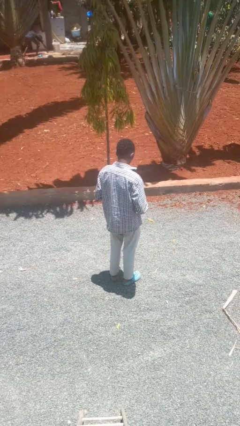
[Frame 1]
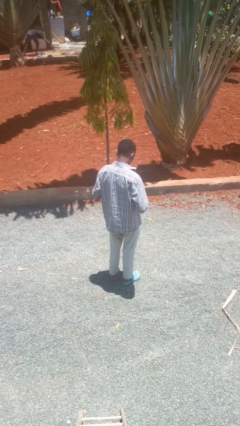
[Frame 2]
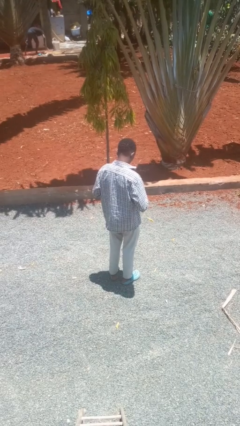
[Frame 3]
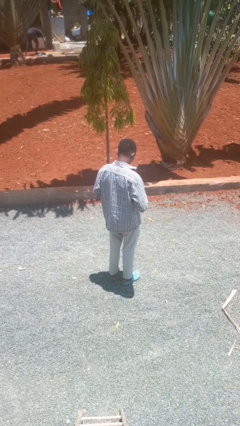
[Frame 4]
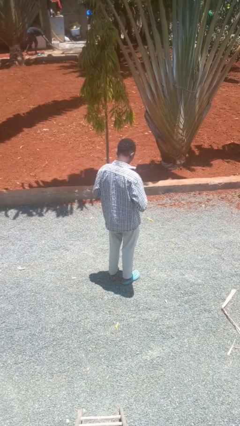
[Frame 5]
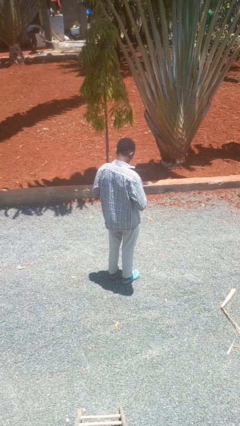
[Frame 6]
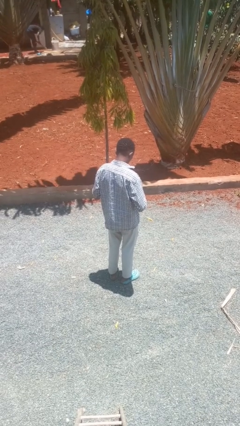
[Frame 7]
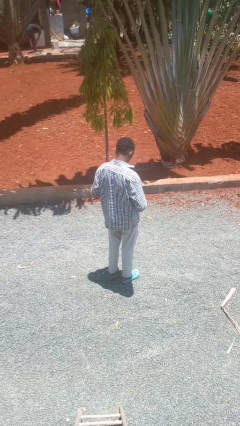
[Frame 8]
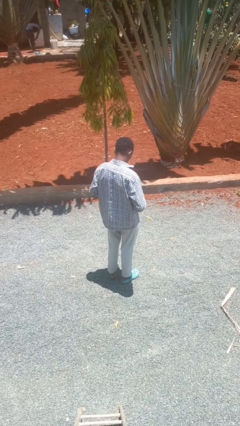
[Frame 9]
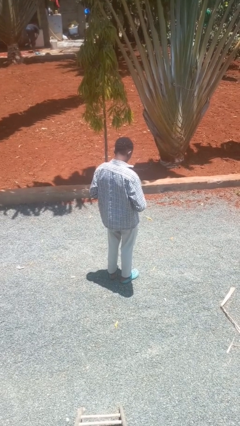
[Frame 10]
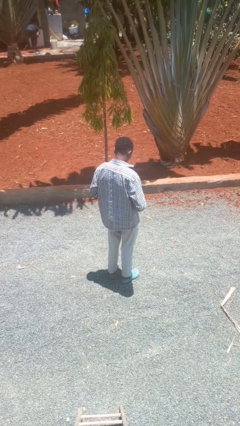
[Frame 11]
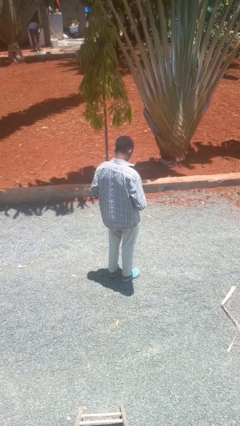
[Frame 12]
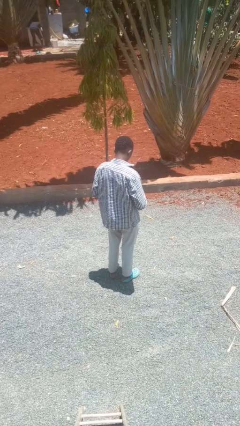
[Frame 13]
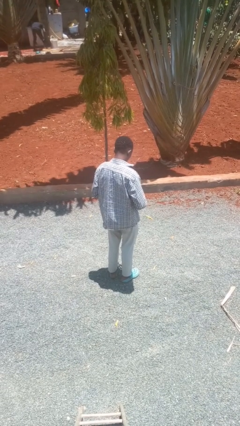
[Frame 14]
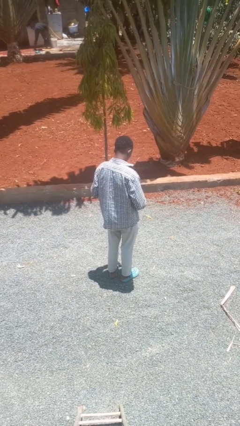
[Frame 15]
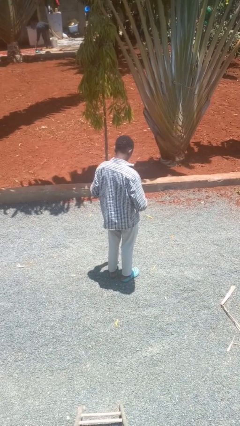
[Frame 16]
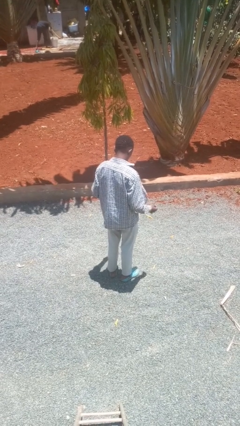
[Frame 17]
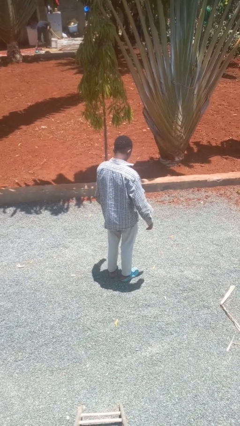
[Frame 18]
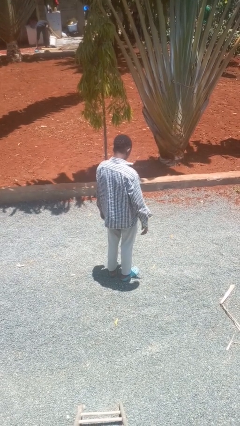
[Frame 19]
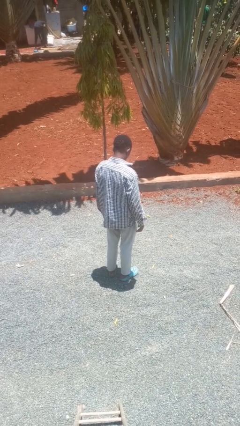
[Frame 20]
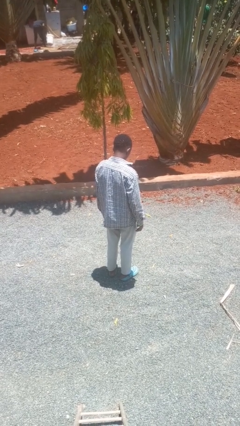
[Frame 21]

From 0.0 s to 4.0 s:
person unbuttons shirt

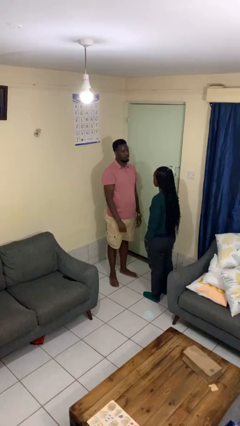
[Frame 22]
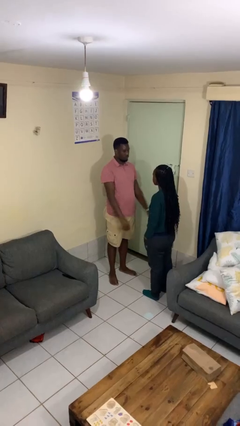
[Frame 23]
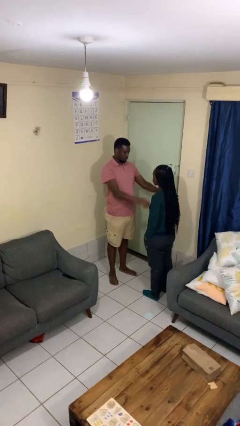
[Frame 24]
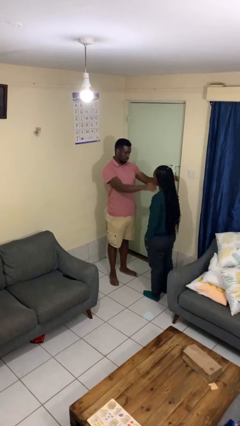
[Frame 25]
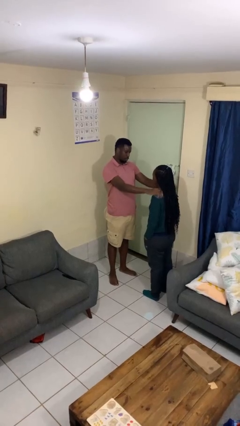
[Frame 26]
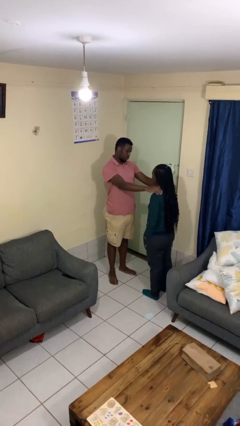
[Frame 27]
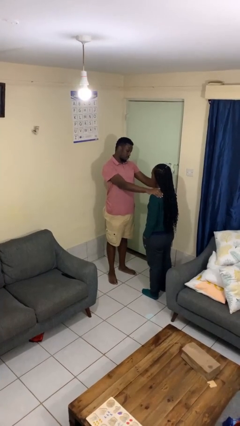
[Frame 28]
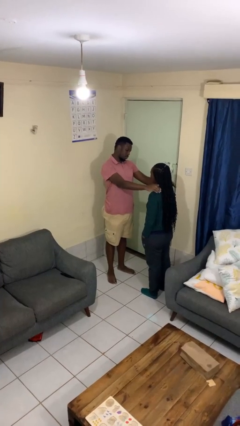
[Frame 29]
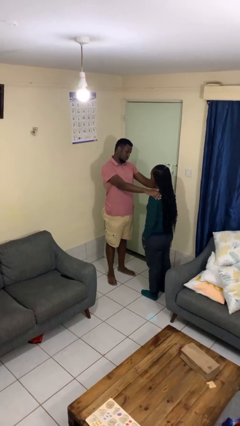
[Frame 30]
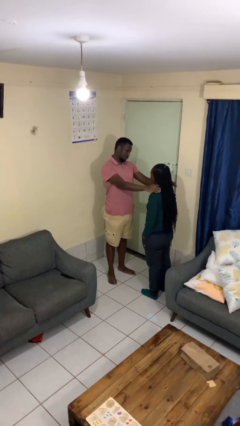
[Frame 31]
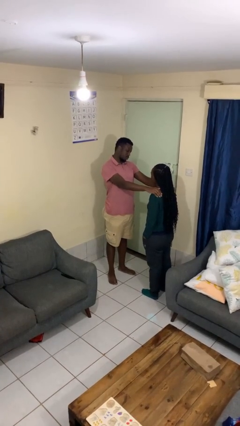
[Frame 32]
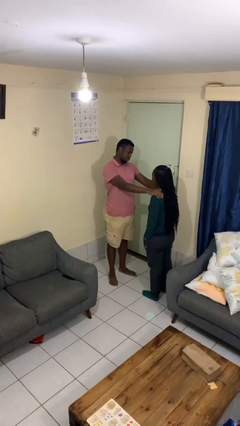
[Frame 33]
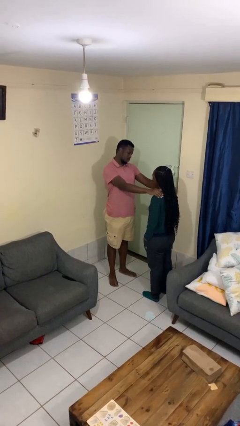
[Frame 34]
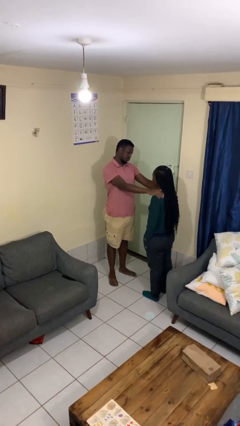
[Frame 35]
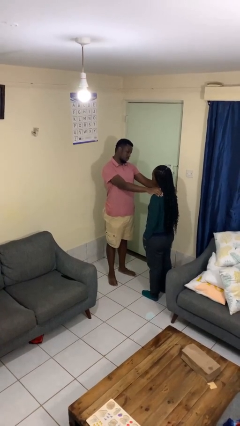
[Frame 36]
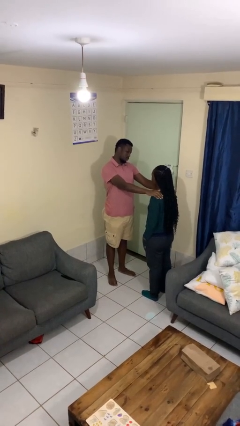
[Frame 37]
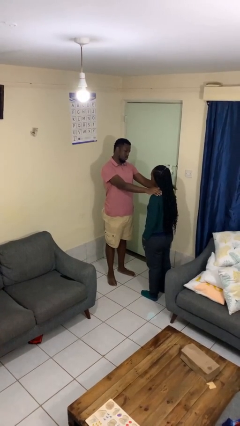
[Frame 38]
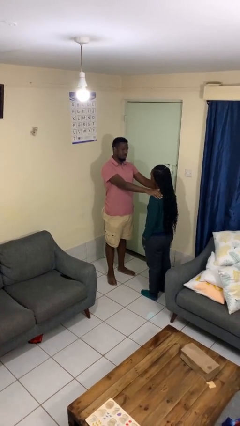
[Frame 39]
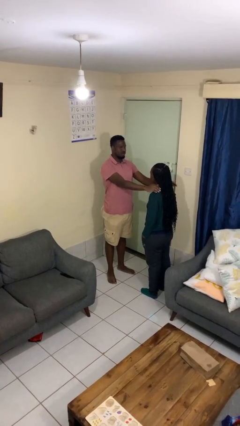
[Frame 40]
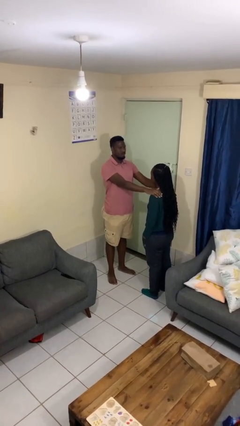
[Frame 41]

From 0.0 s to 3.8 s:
person pounds shoulders of person

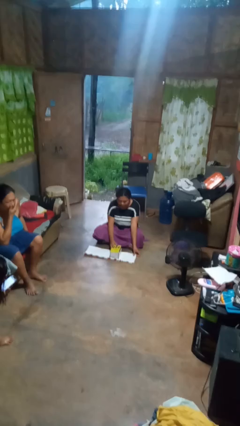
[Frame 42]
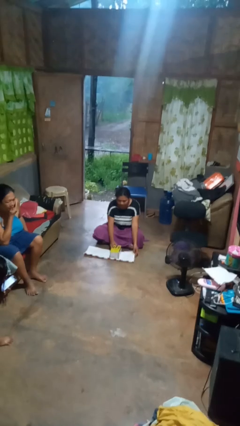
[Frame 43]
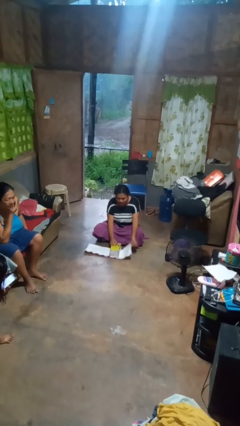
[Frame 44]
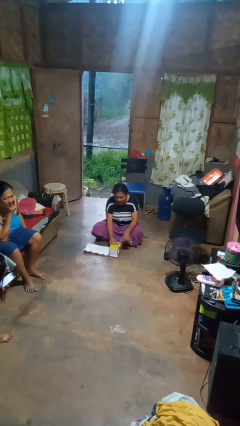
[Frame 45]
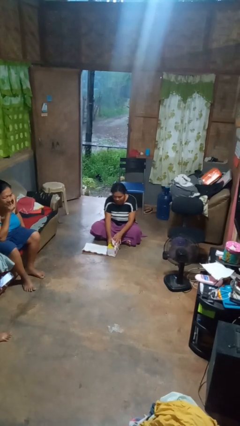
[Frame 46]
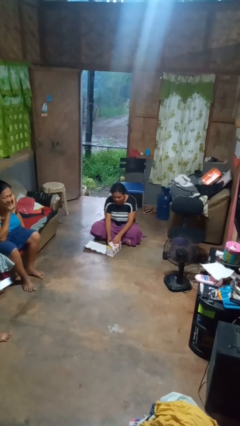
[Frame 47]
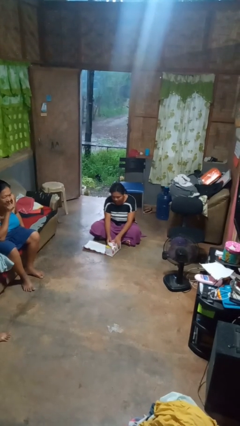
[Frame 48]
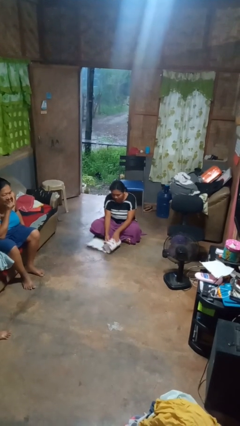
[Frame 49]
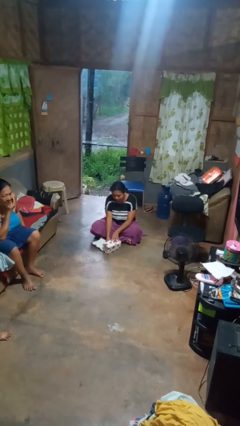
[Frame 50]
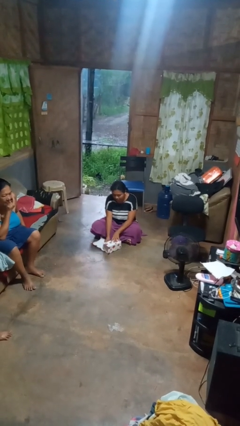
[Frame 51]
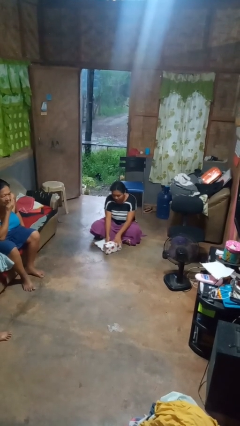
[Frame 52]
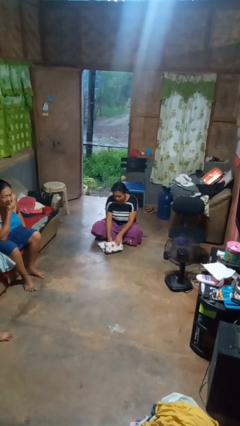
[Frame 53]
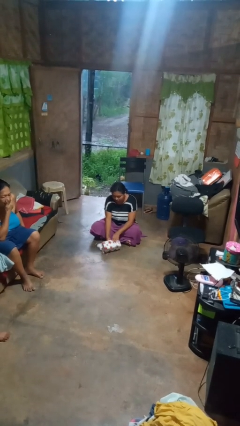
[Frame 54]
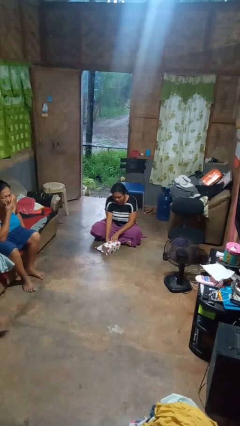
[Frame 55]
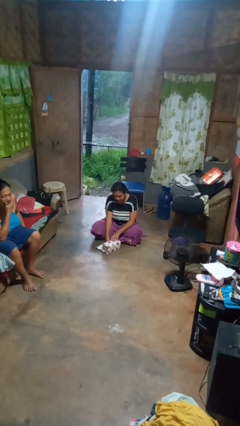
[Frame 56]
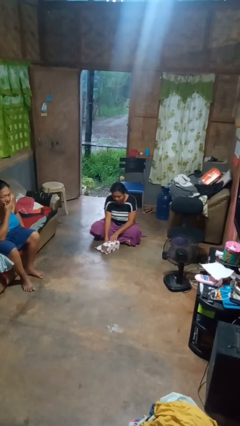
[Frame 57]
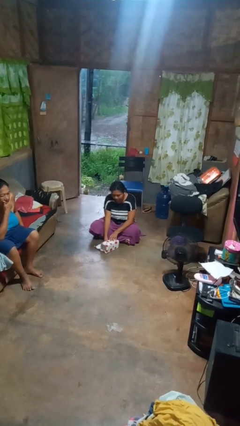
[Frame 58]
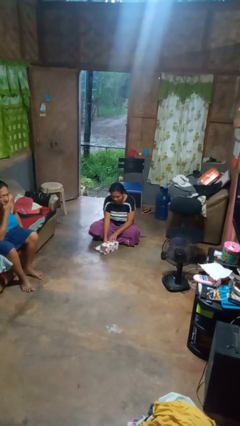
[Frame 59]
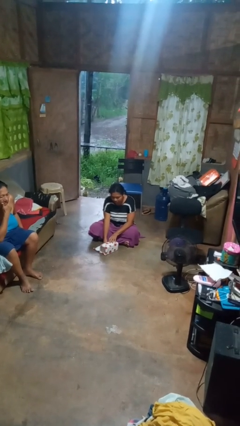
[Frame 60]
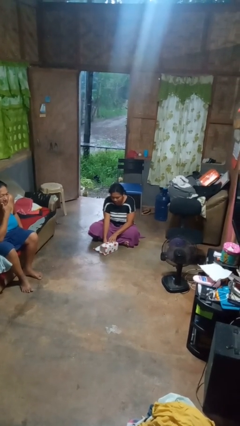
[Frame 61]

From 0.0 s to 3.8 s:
person wraps box

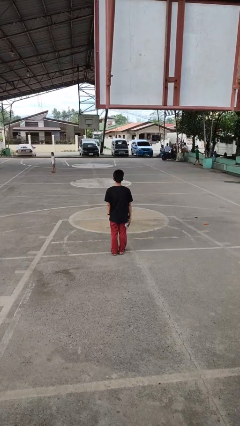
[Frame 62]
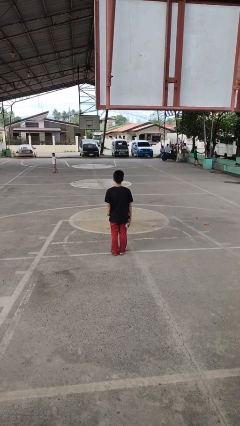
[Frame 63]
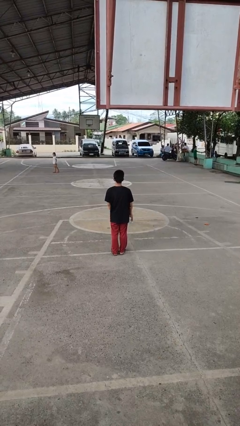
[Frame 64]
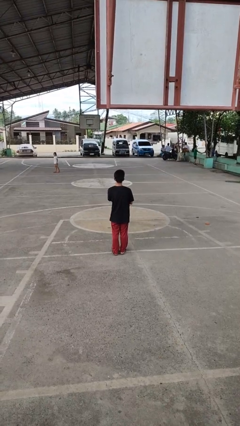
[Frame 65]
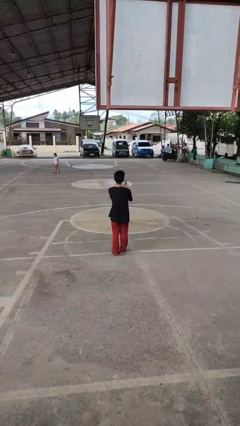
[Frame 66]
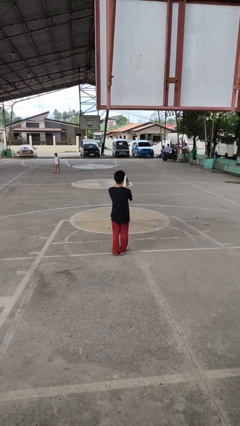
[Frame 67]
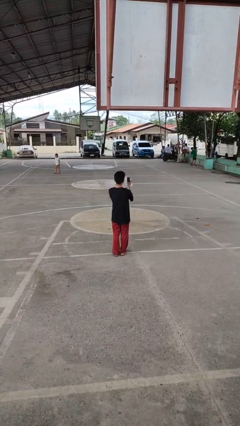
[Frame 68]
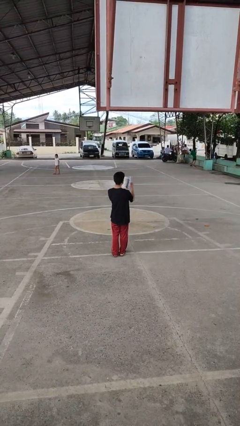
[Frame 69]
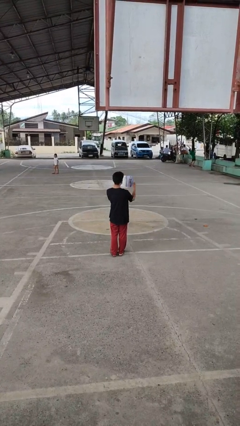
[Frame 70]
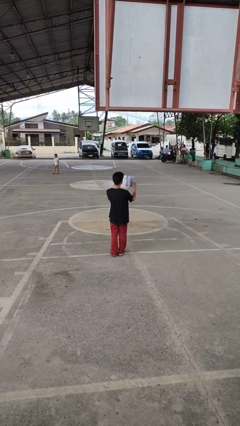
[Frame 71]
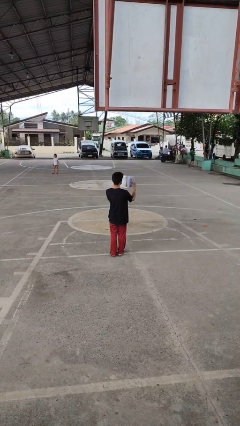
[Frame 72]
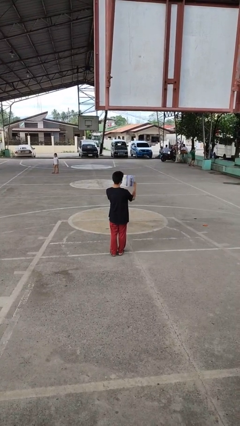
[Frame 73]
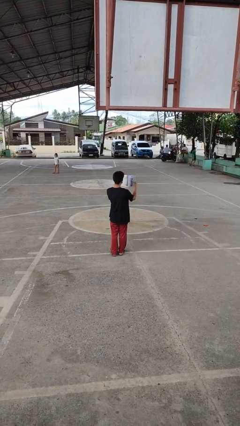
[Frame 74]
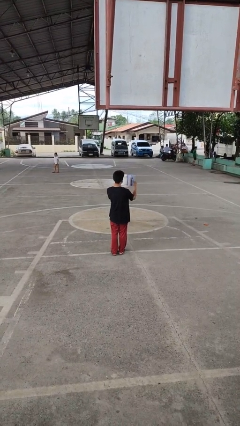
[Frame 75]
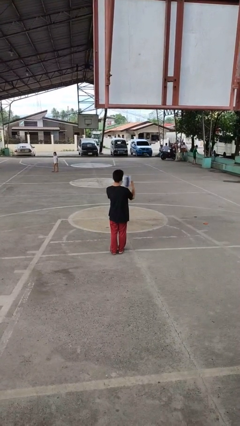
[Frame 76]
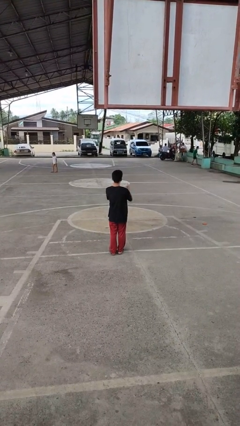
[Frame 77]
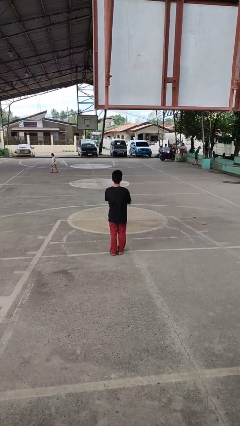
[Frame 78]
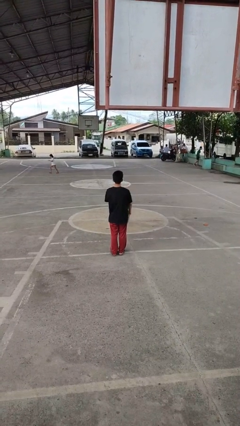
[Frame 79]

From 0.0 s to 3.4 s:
person reads magazine

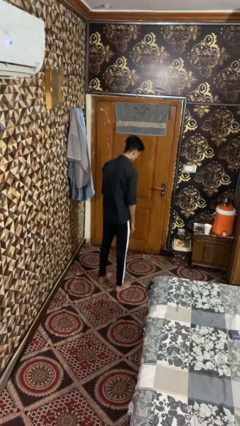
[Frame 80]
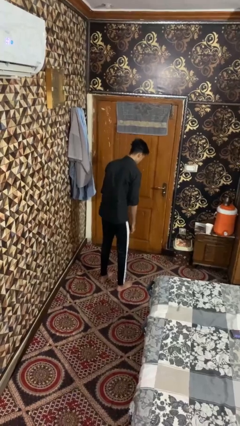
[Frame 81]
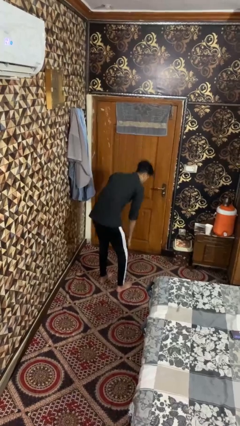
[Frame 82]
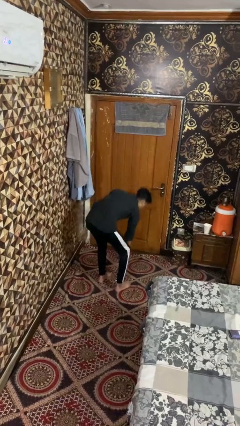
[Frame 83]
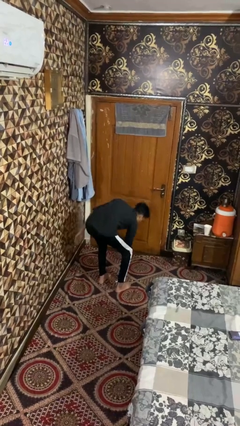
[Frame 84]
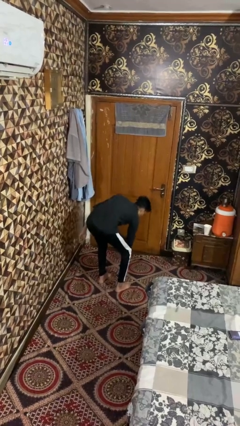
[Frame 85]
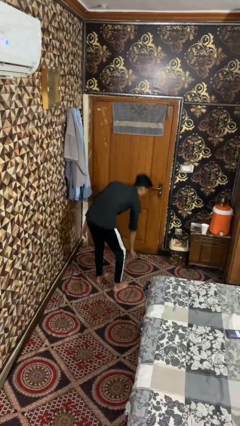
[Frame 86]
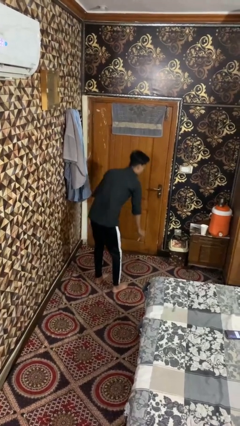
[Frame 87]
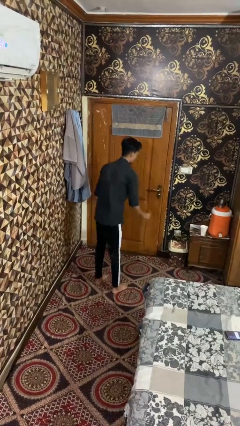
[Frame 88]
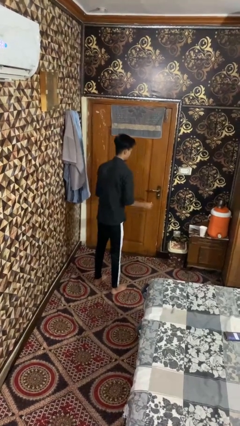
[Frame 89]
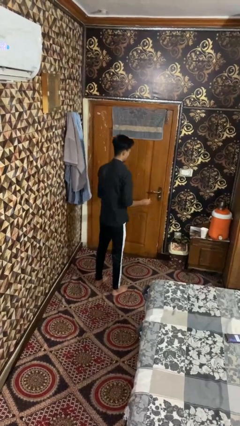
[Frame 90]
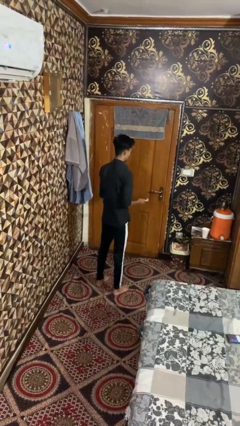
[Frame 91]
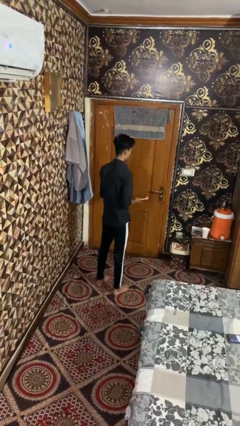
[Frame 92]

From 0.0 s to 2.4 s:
person picks up object from floor

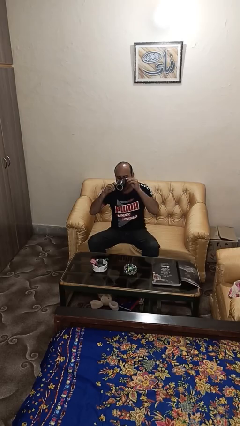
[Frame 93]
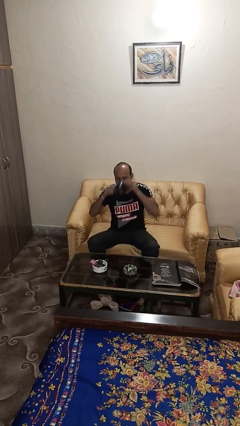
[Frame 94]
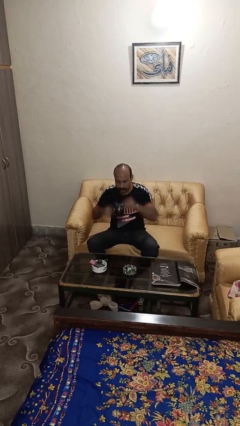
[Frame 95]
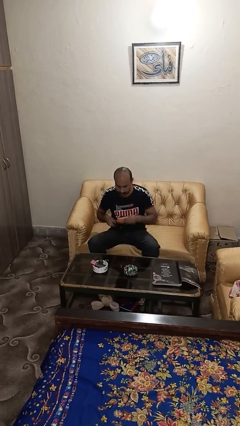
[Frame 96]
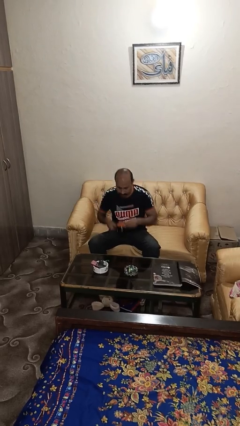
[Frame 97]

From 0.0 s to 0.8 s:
person drinks from mug
